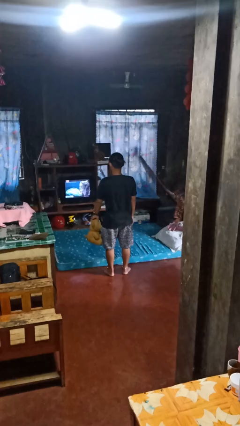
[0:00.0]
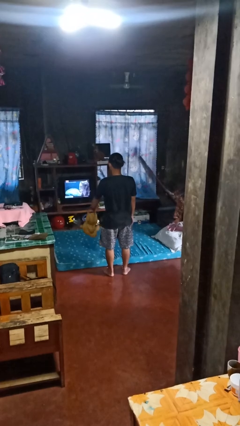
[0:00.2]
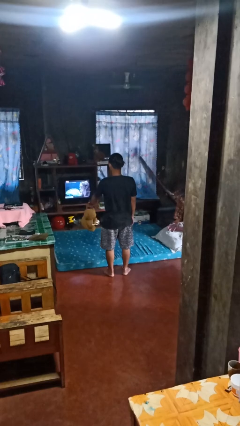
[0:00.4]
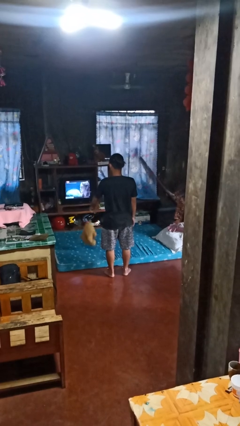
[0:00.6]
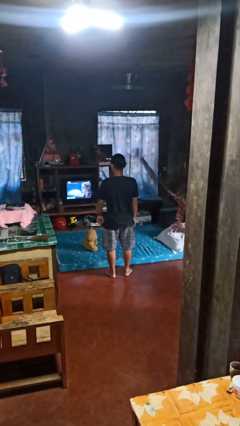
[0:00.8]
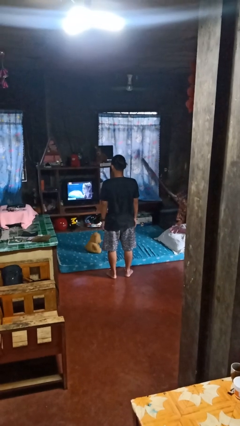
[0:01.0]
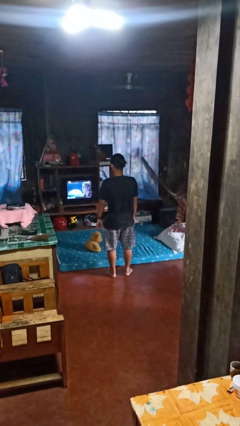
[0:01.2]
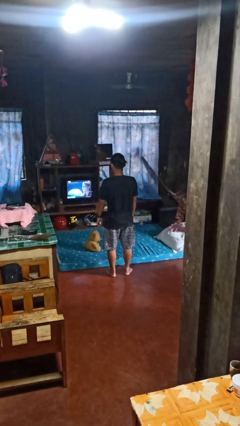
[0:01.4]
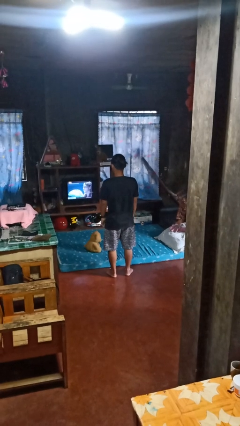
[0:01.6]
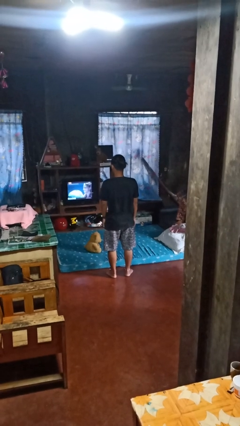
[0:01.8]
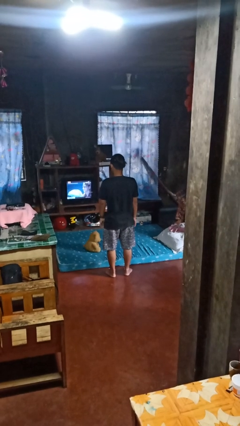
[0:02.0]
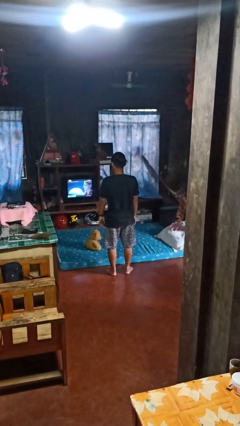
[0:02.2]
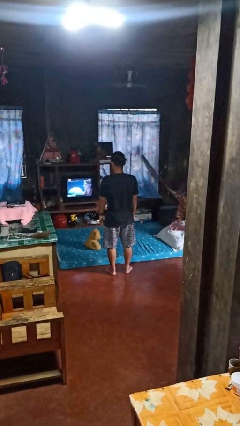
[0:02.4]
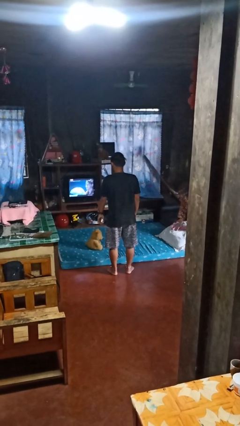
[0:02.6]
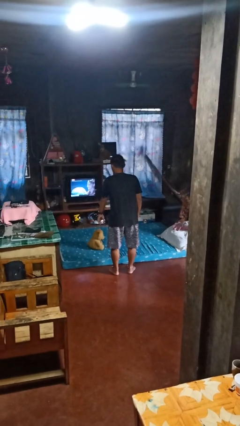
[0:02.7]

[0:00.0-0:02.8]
person throws object on bed

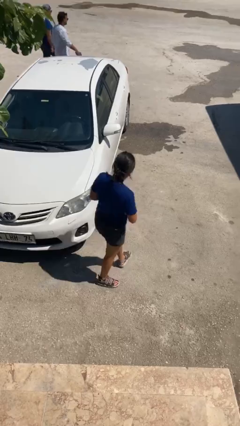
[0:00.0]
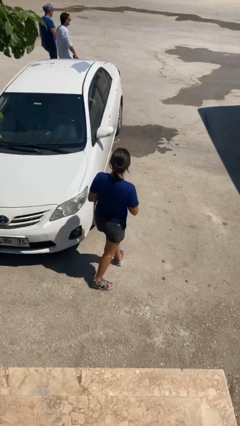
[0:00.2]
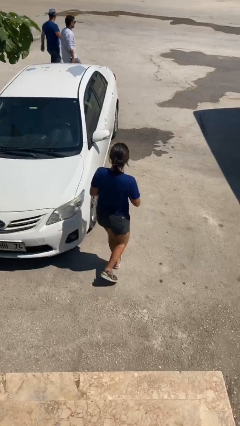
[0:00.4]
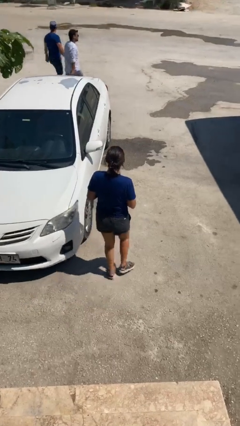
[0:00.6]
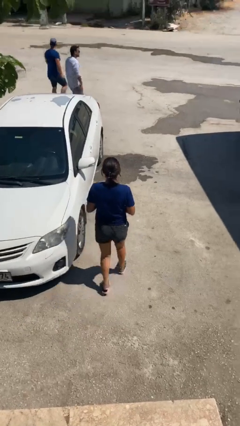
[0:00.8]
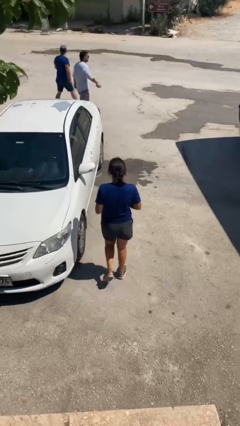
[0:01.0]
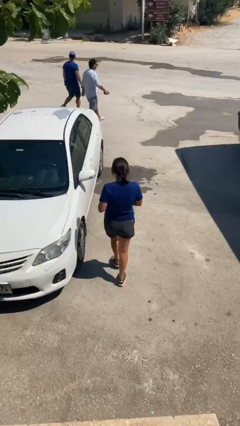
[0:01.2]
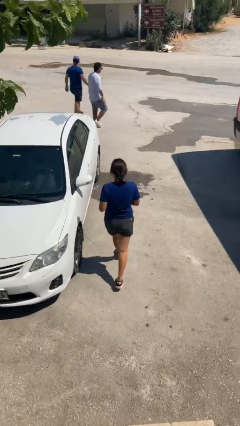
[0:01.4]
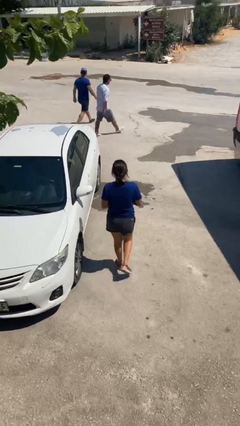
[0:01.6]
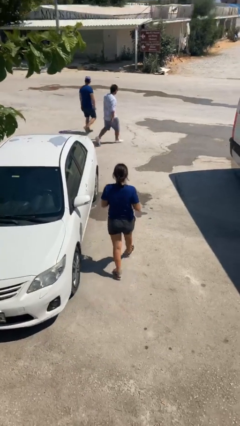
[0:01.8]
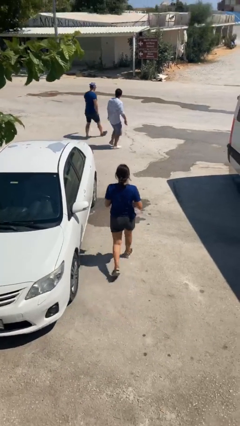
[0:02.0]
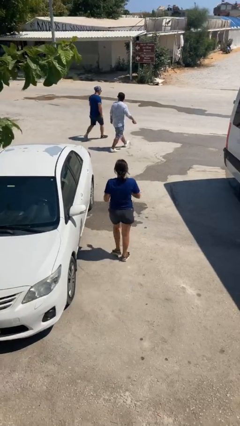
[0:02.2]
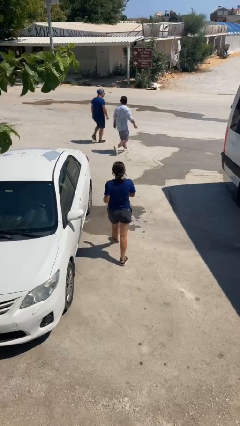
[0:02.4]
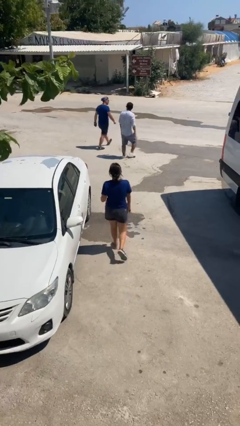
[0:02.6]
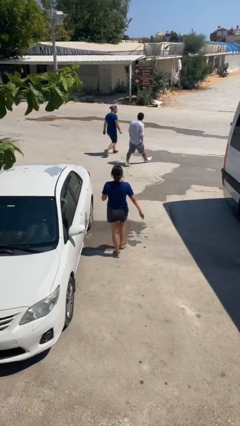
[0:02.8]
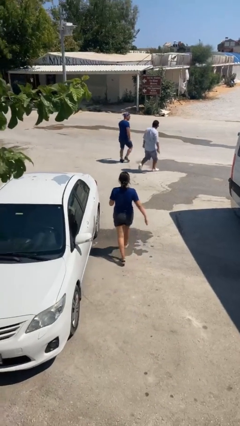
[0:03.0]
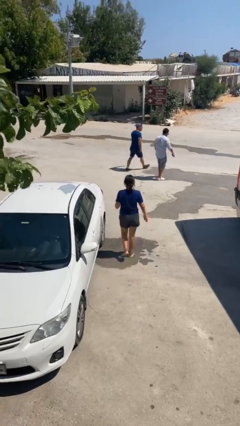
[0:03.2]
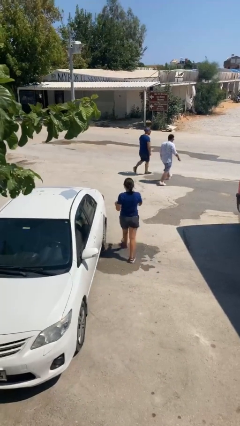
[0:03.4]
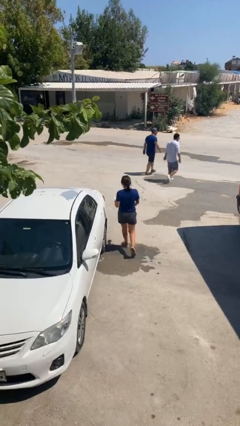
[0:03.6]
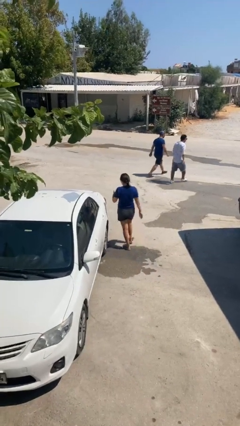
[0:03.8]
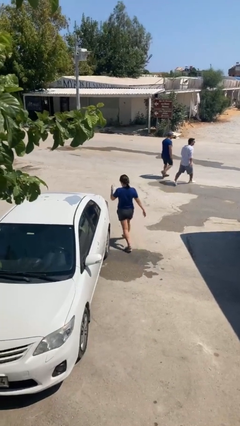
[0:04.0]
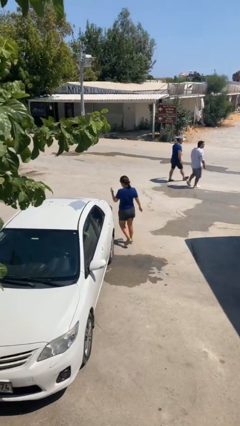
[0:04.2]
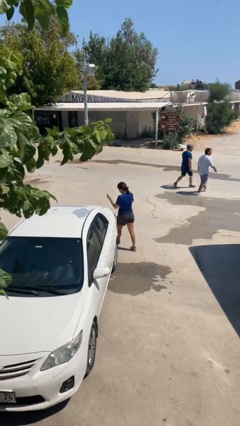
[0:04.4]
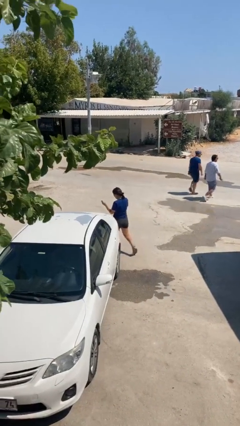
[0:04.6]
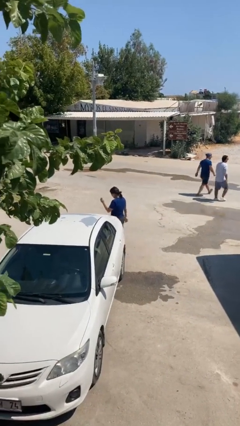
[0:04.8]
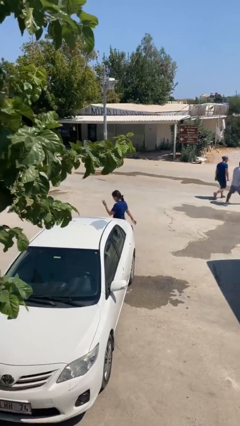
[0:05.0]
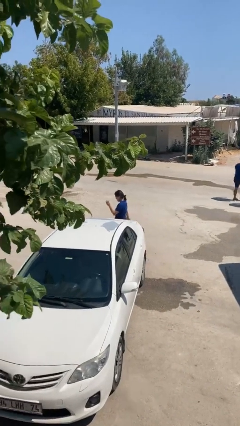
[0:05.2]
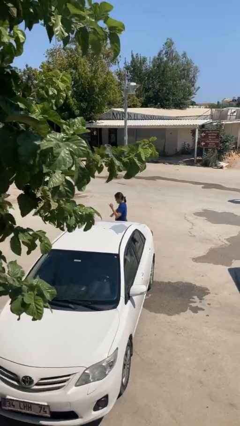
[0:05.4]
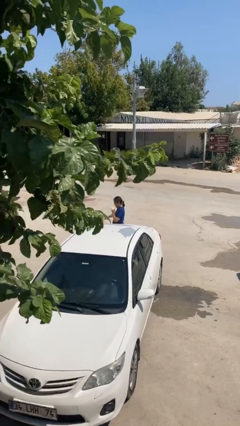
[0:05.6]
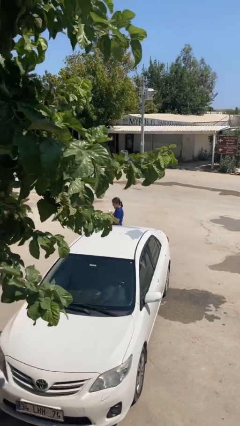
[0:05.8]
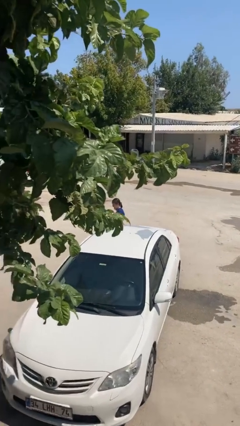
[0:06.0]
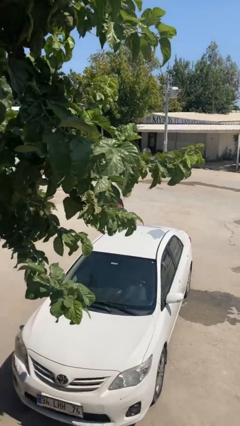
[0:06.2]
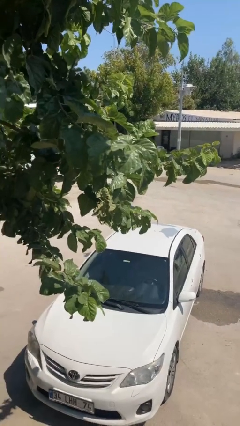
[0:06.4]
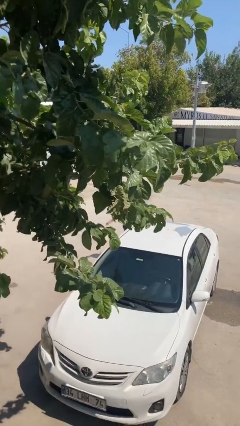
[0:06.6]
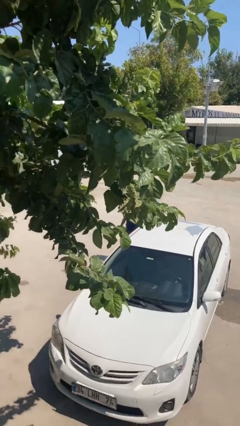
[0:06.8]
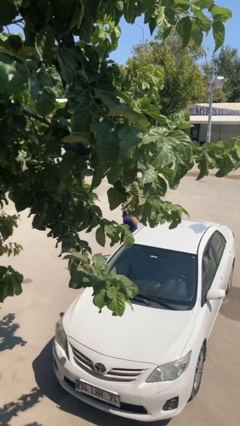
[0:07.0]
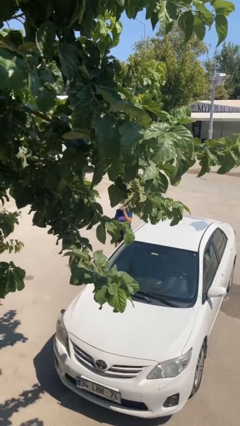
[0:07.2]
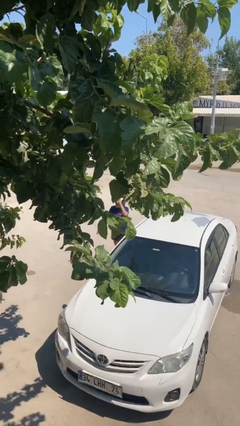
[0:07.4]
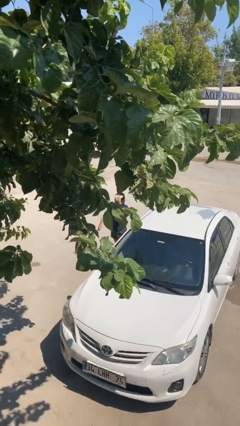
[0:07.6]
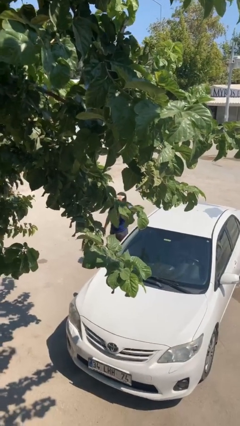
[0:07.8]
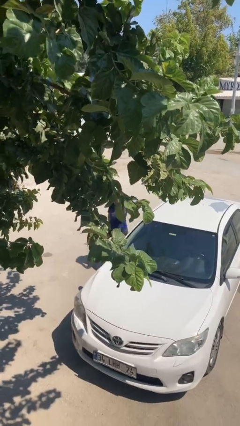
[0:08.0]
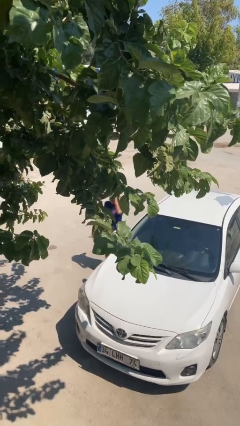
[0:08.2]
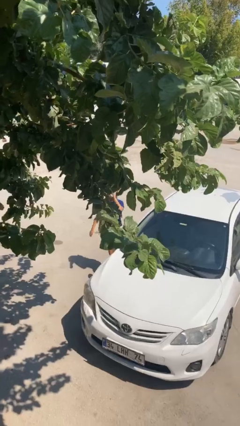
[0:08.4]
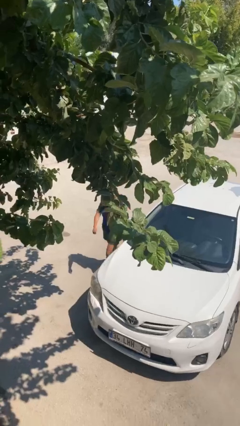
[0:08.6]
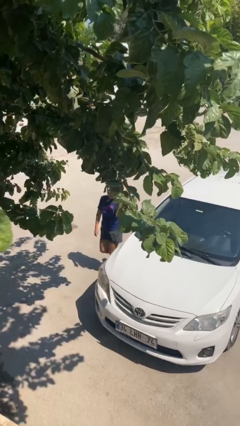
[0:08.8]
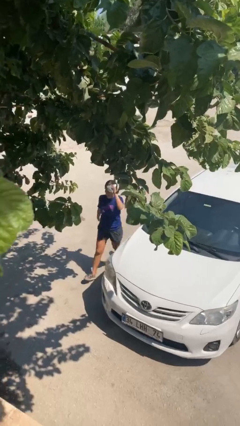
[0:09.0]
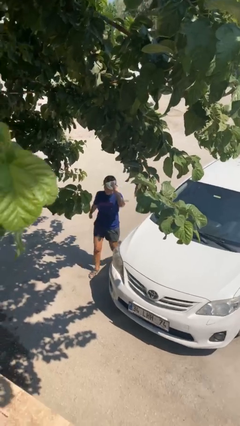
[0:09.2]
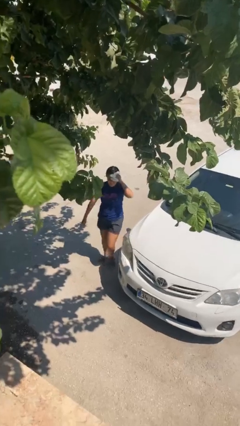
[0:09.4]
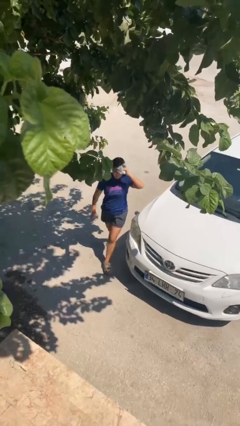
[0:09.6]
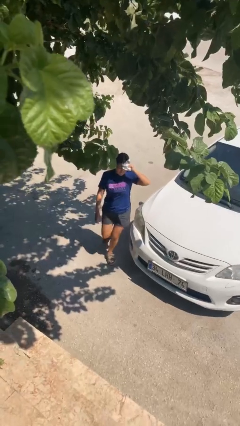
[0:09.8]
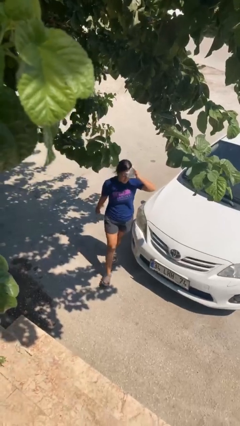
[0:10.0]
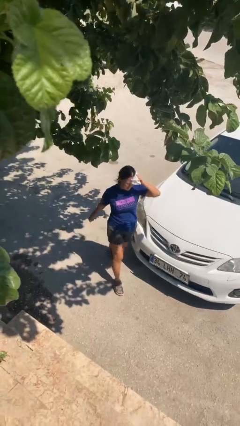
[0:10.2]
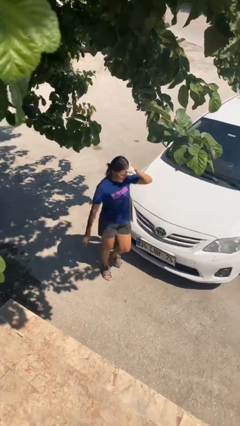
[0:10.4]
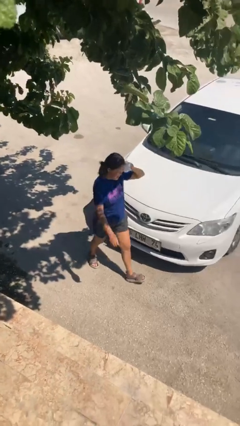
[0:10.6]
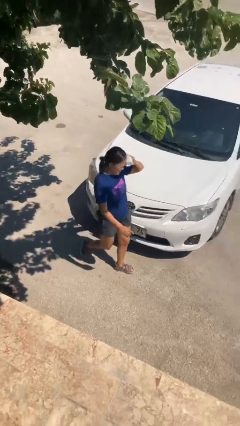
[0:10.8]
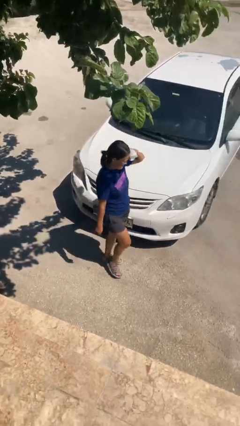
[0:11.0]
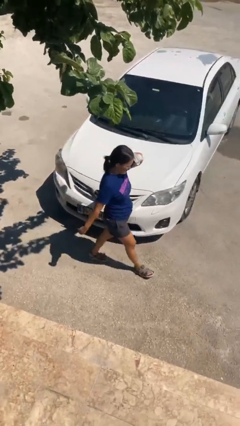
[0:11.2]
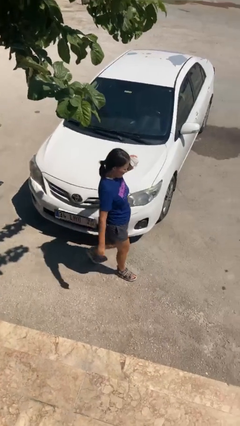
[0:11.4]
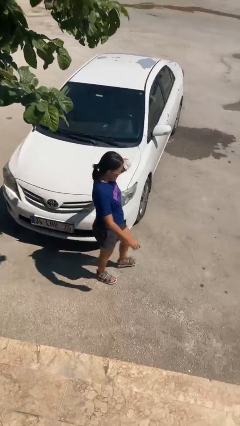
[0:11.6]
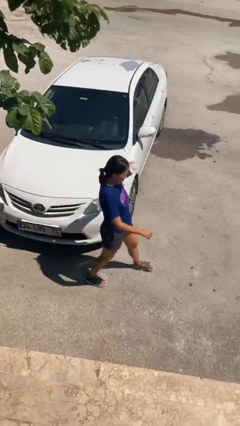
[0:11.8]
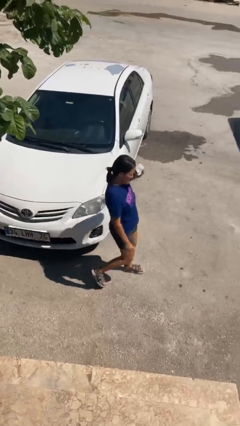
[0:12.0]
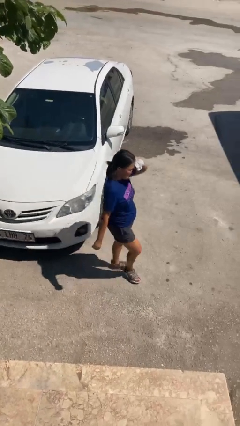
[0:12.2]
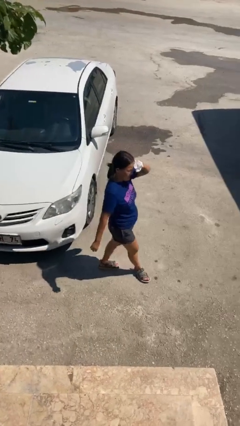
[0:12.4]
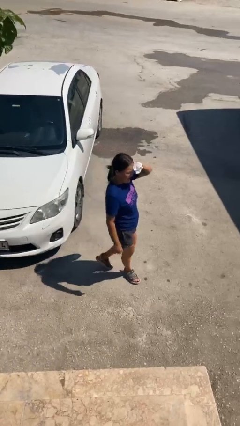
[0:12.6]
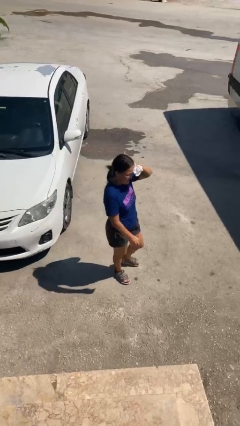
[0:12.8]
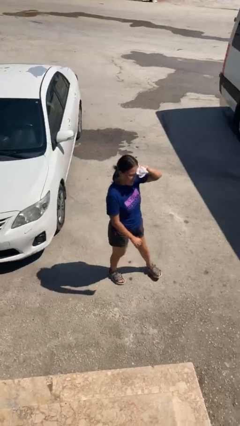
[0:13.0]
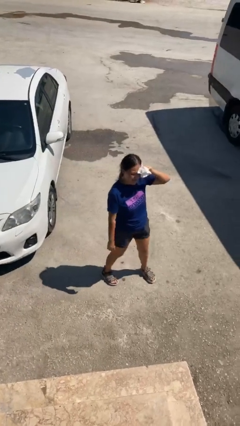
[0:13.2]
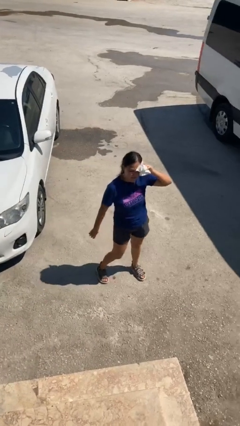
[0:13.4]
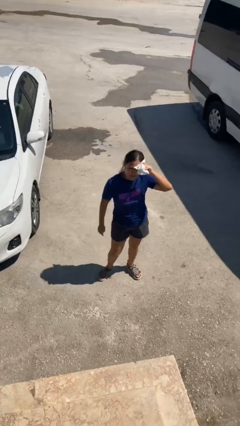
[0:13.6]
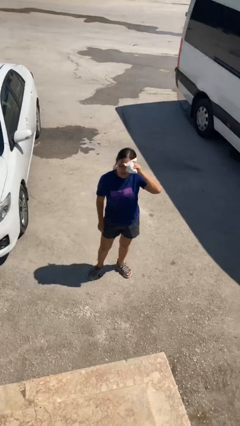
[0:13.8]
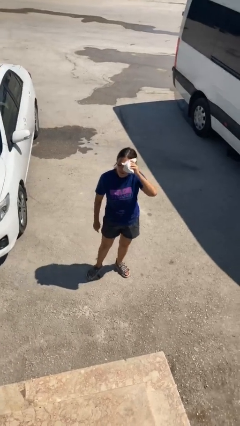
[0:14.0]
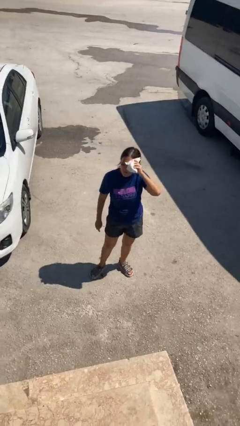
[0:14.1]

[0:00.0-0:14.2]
person walks around car

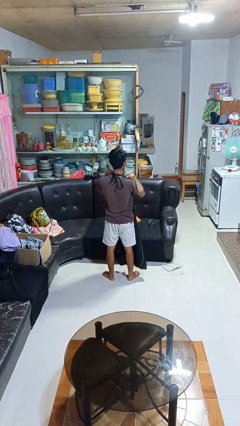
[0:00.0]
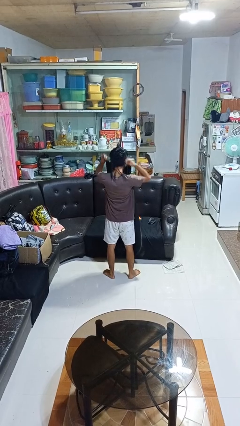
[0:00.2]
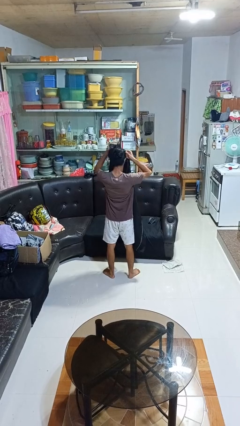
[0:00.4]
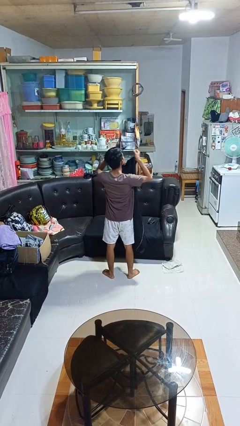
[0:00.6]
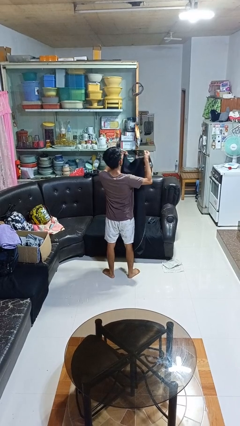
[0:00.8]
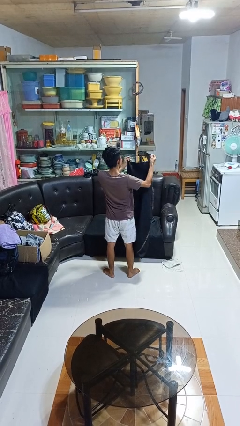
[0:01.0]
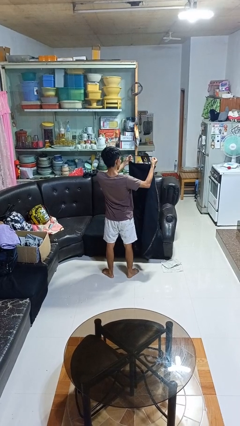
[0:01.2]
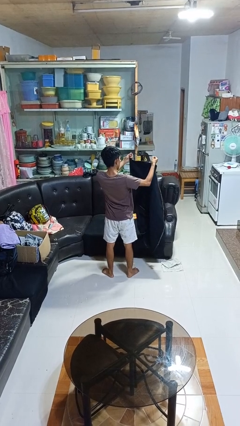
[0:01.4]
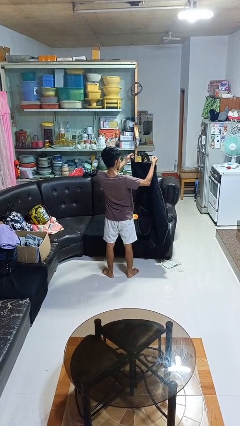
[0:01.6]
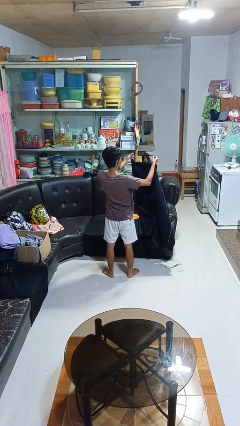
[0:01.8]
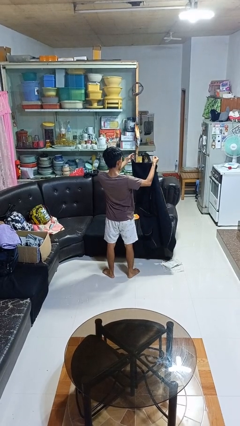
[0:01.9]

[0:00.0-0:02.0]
person takes off apron
